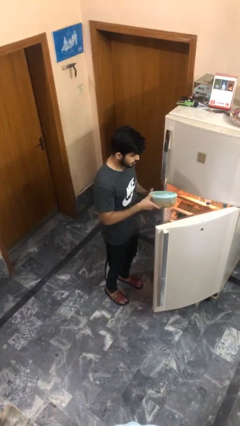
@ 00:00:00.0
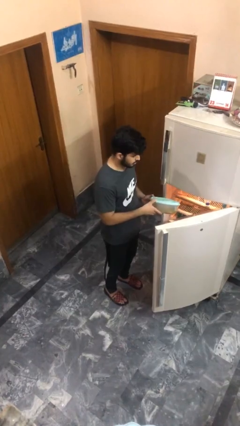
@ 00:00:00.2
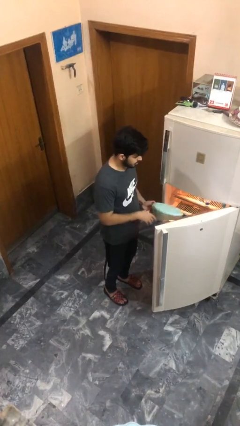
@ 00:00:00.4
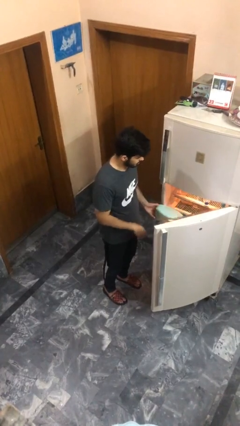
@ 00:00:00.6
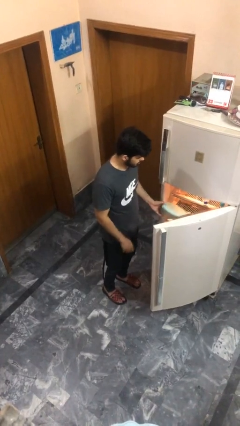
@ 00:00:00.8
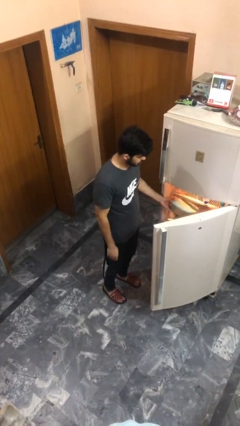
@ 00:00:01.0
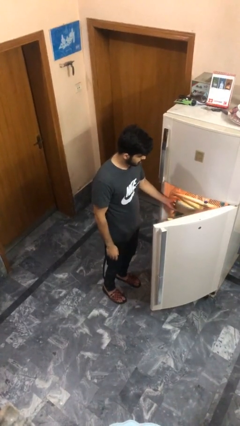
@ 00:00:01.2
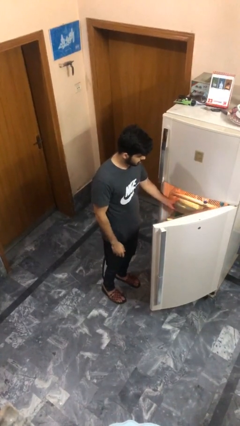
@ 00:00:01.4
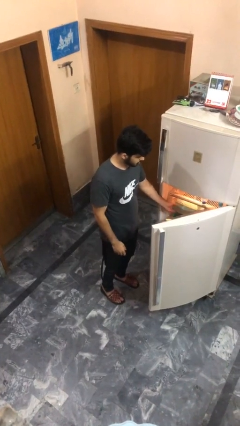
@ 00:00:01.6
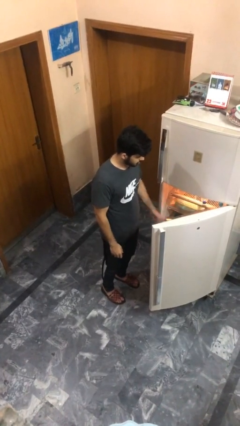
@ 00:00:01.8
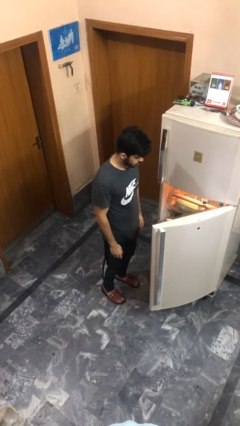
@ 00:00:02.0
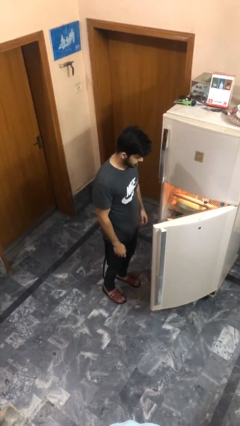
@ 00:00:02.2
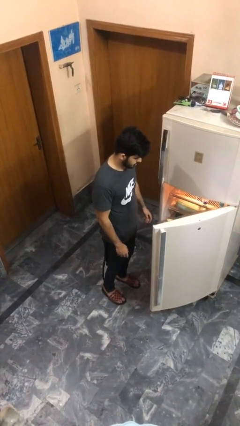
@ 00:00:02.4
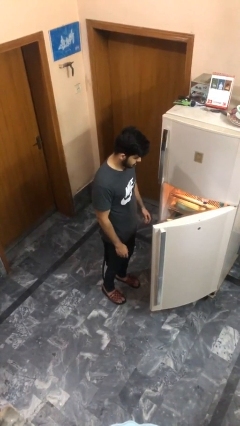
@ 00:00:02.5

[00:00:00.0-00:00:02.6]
person puts down object into cabinet

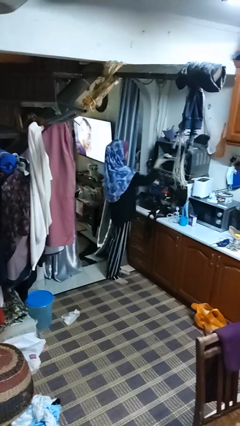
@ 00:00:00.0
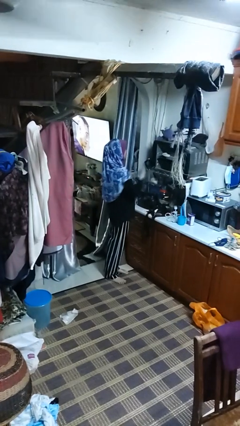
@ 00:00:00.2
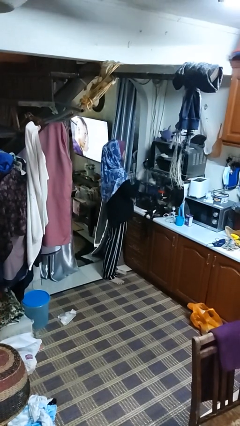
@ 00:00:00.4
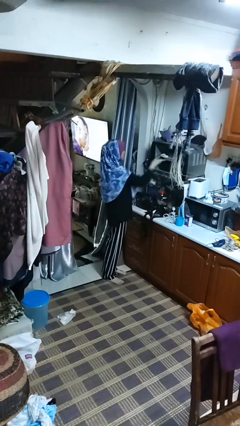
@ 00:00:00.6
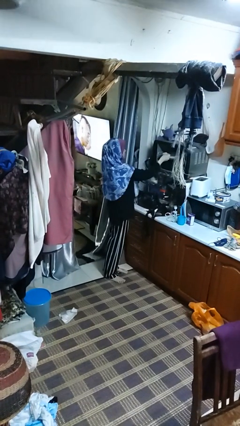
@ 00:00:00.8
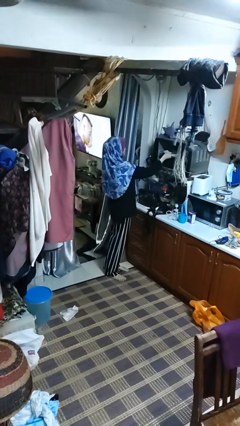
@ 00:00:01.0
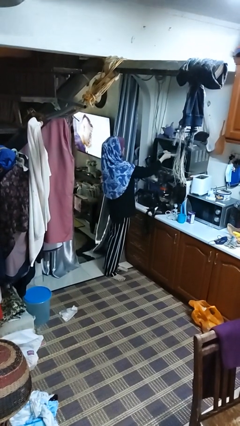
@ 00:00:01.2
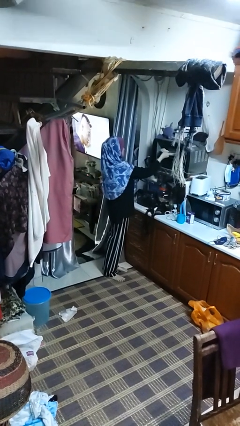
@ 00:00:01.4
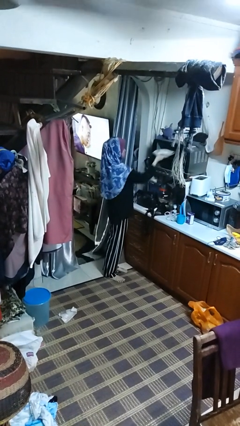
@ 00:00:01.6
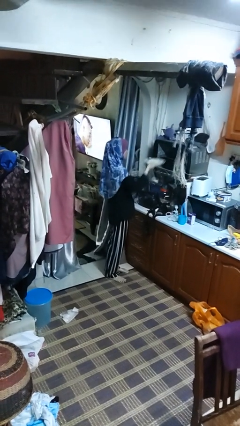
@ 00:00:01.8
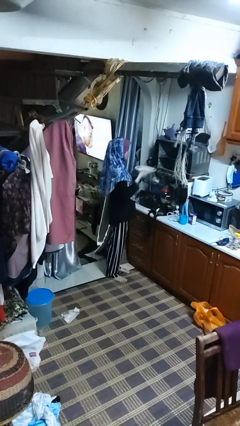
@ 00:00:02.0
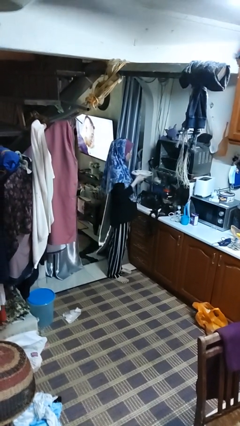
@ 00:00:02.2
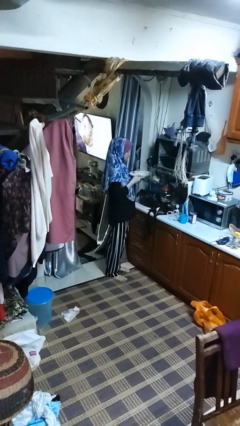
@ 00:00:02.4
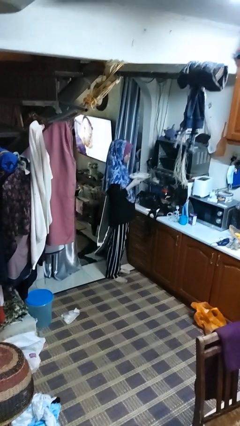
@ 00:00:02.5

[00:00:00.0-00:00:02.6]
person takes object from oven

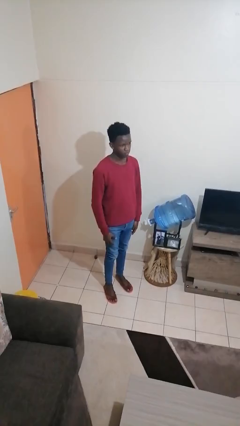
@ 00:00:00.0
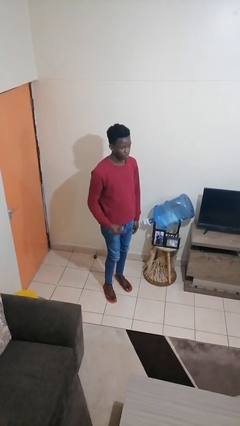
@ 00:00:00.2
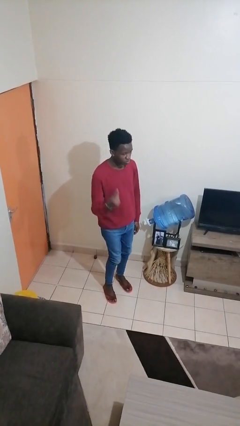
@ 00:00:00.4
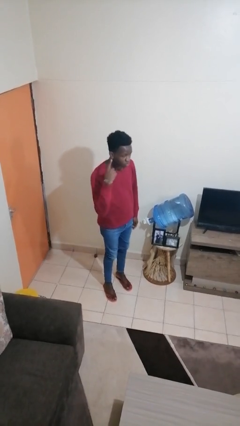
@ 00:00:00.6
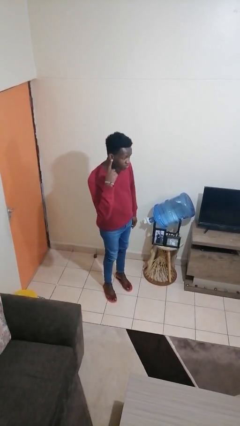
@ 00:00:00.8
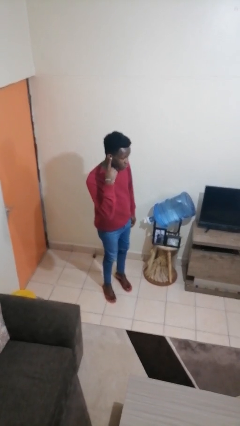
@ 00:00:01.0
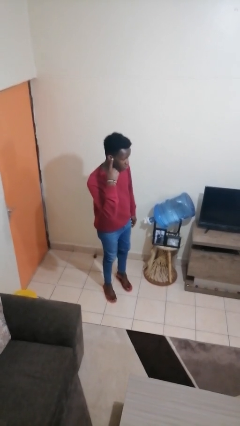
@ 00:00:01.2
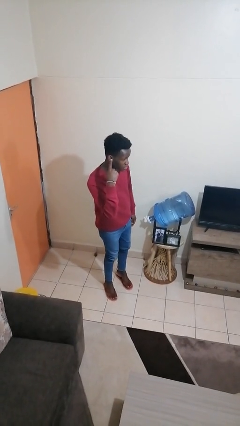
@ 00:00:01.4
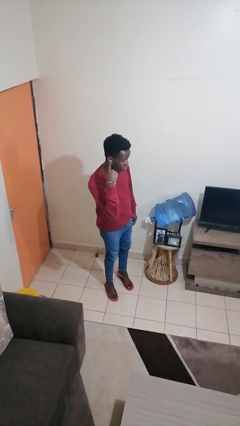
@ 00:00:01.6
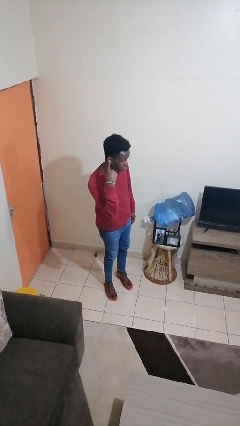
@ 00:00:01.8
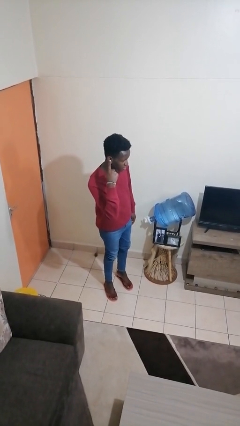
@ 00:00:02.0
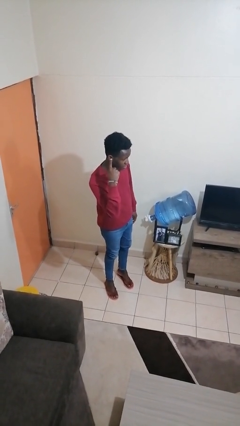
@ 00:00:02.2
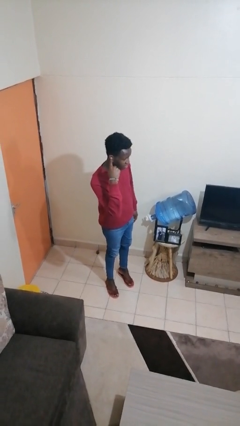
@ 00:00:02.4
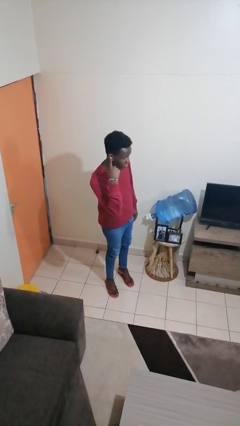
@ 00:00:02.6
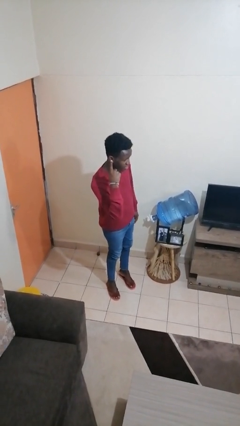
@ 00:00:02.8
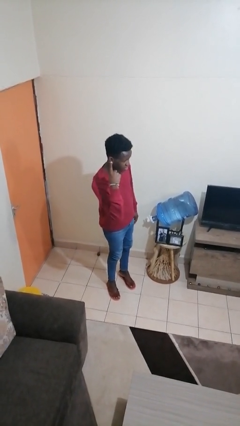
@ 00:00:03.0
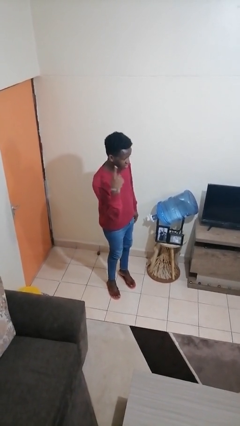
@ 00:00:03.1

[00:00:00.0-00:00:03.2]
person gestures listen closely

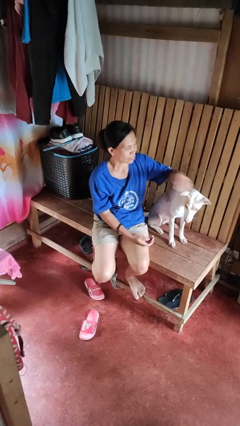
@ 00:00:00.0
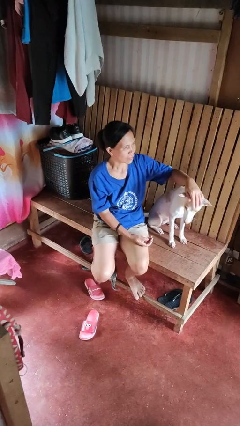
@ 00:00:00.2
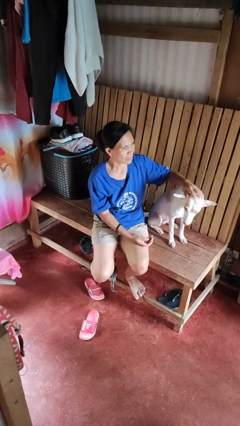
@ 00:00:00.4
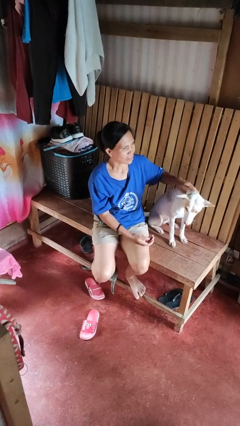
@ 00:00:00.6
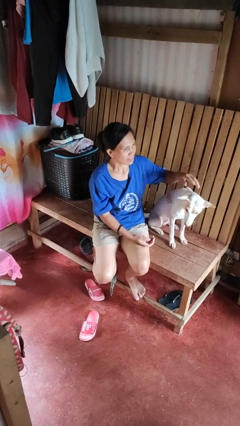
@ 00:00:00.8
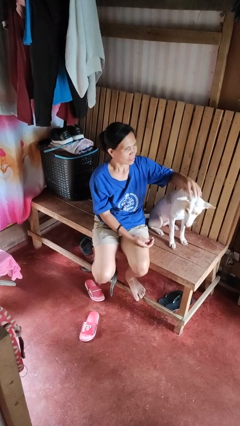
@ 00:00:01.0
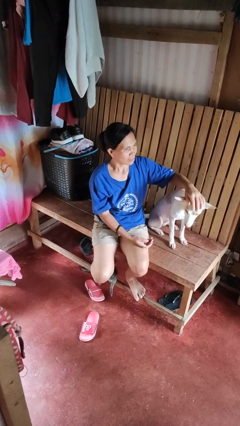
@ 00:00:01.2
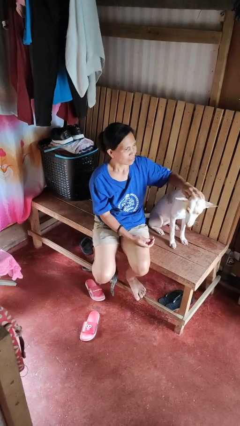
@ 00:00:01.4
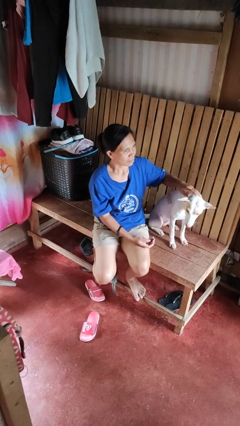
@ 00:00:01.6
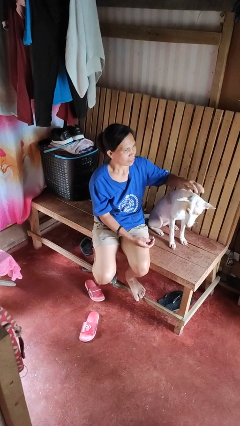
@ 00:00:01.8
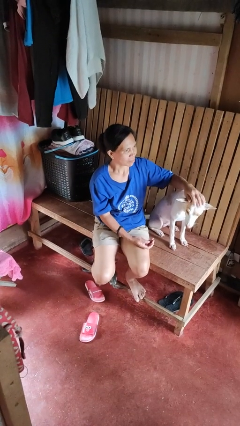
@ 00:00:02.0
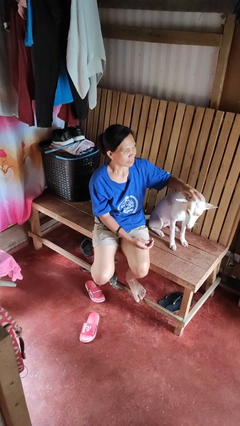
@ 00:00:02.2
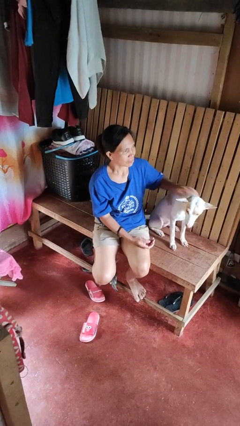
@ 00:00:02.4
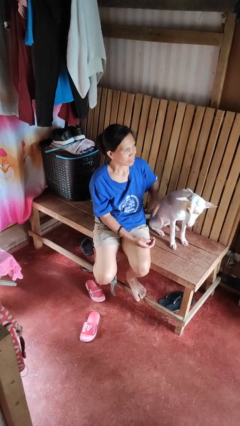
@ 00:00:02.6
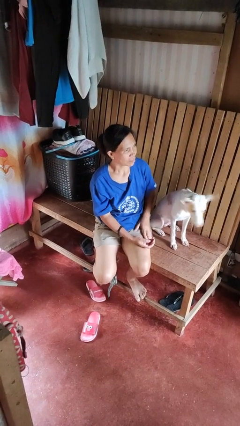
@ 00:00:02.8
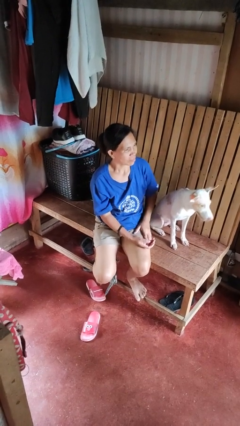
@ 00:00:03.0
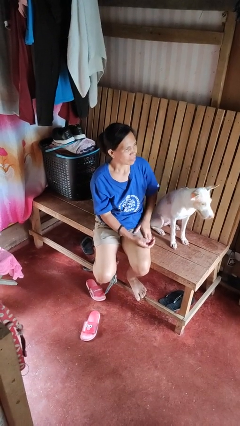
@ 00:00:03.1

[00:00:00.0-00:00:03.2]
person pets dog

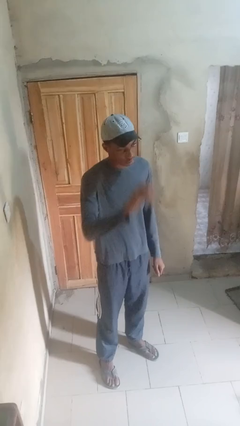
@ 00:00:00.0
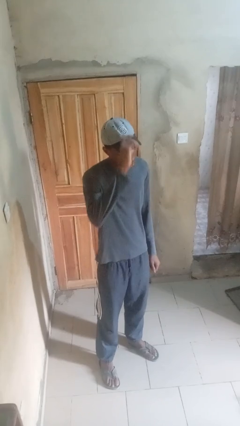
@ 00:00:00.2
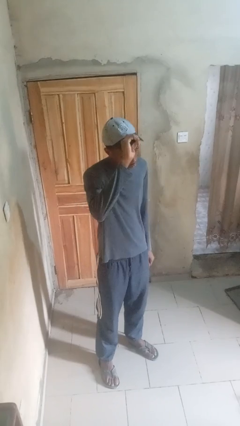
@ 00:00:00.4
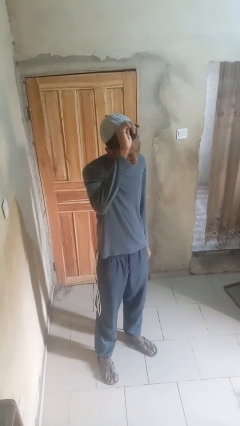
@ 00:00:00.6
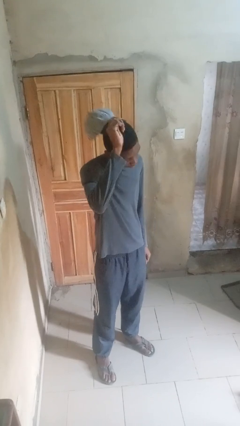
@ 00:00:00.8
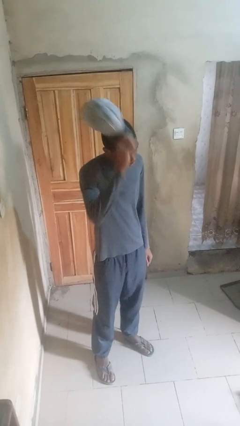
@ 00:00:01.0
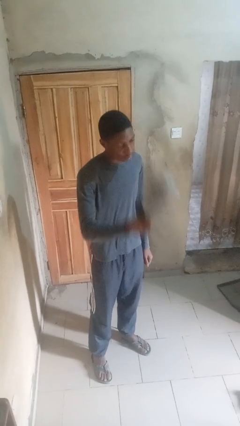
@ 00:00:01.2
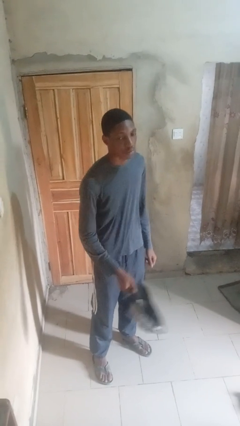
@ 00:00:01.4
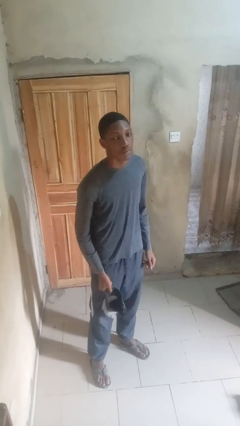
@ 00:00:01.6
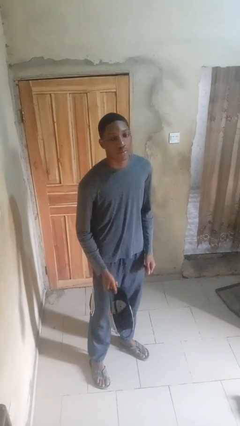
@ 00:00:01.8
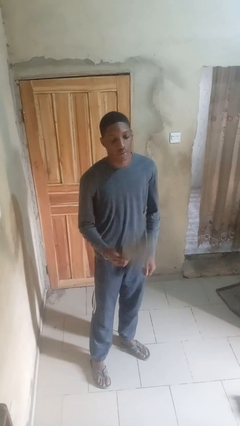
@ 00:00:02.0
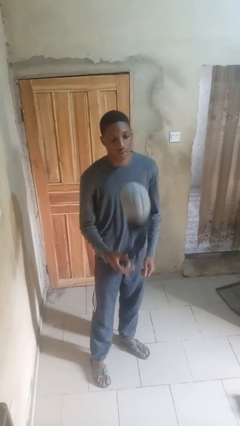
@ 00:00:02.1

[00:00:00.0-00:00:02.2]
person takes off hat

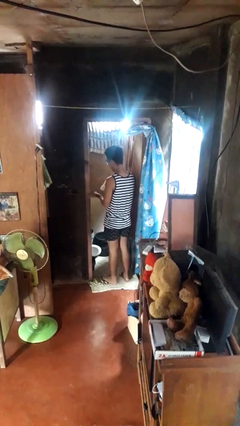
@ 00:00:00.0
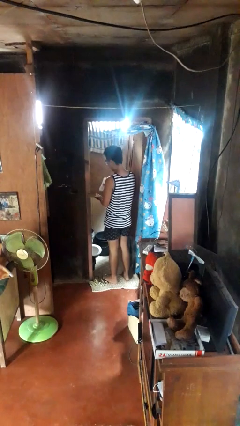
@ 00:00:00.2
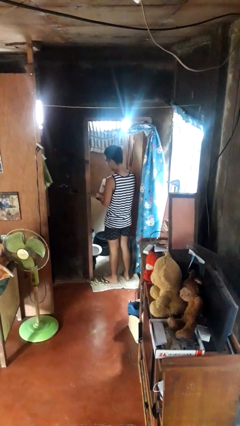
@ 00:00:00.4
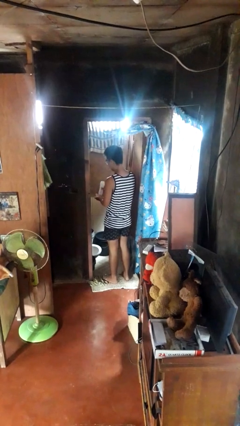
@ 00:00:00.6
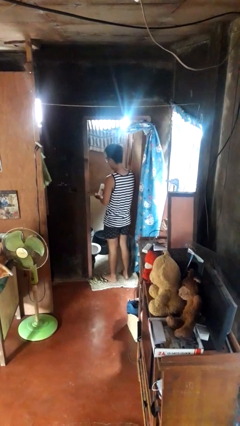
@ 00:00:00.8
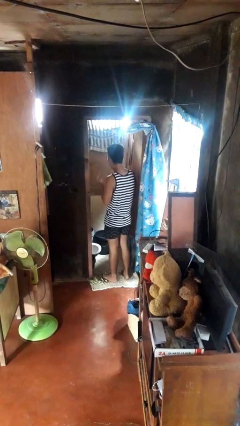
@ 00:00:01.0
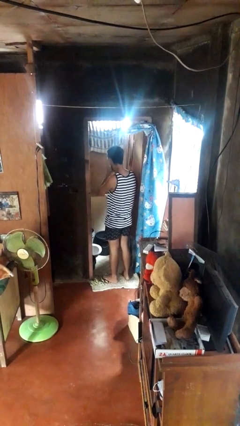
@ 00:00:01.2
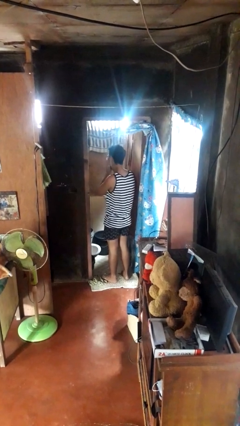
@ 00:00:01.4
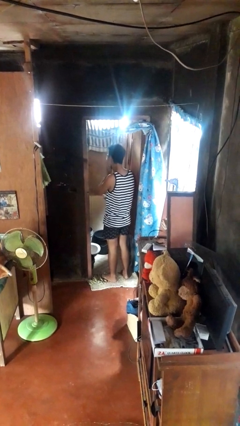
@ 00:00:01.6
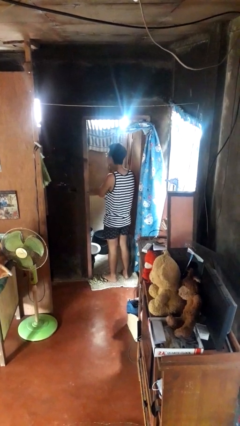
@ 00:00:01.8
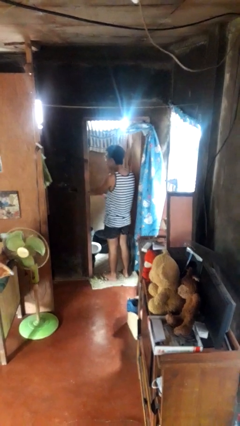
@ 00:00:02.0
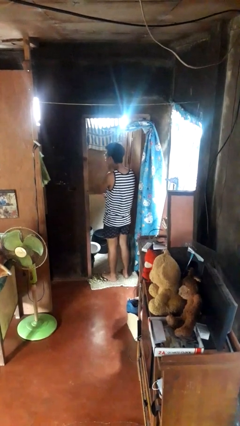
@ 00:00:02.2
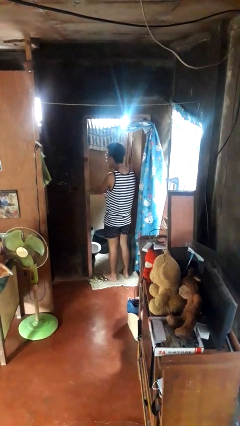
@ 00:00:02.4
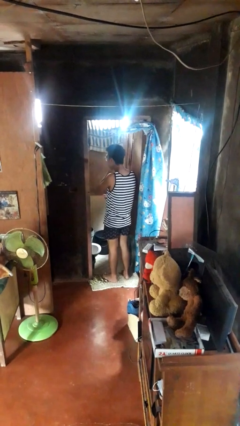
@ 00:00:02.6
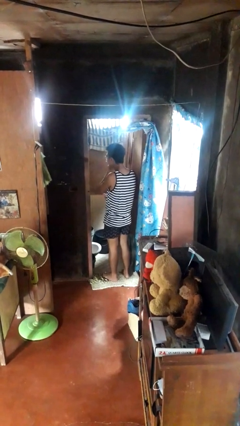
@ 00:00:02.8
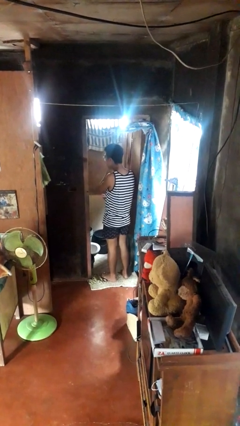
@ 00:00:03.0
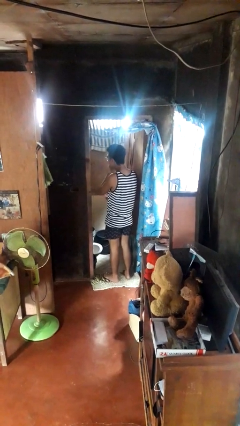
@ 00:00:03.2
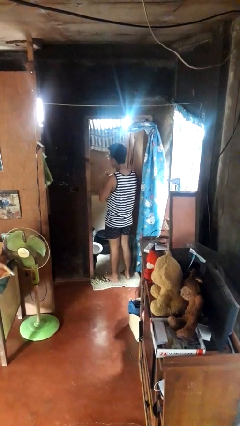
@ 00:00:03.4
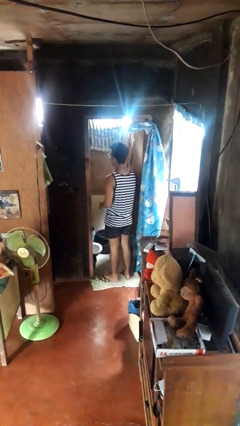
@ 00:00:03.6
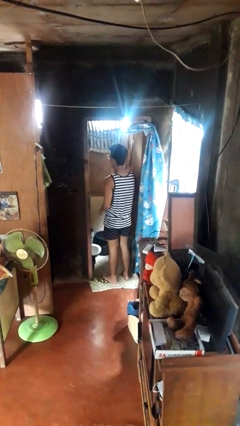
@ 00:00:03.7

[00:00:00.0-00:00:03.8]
person applies facial moisturizer
